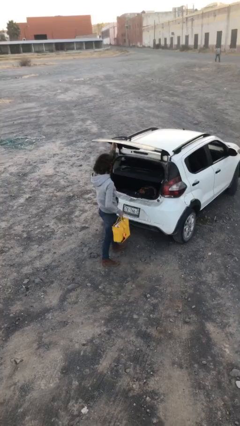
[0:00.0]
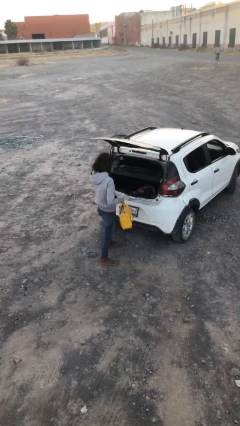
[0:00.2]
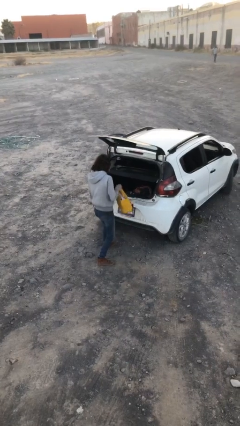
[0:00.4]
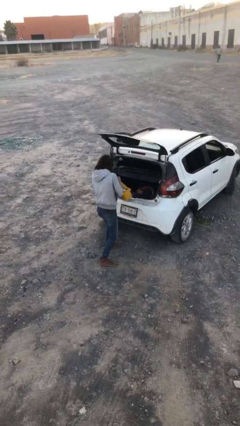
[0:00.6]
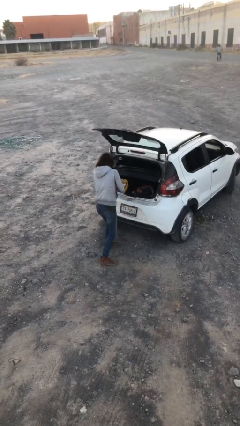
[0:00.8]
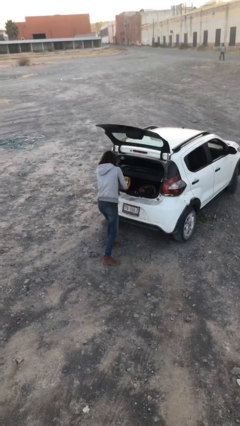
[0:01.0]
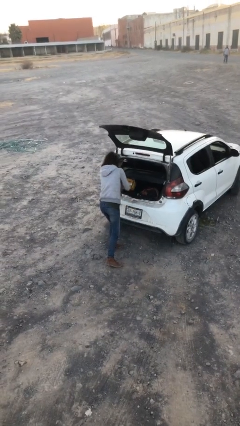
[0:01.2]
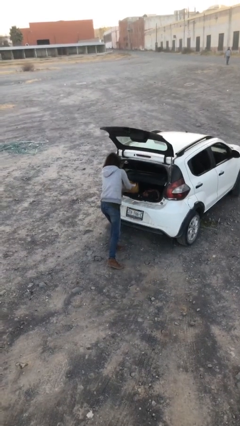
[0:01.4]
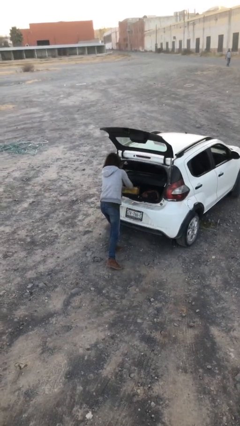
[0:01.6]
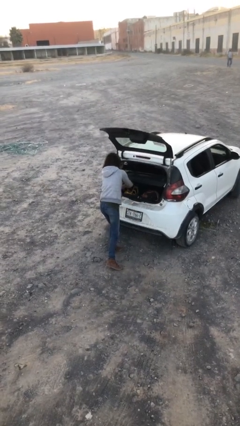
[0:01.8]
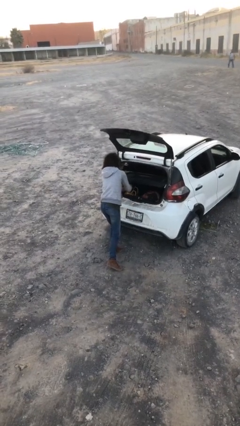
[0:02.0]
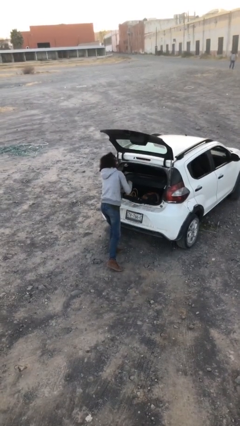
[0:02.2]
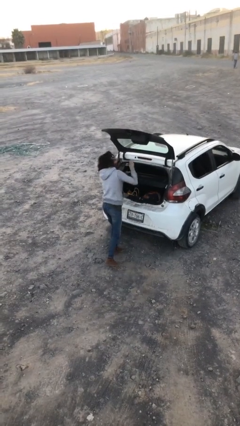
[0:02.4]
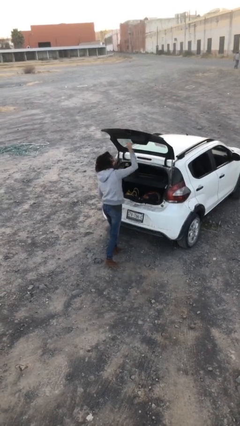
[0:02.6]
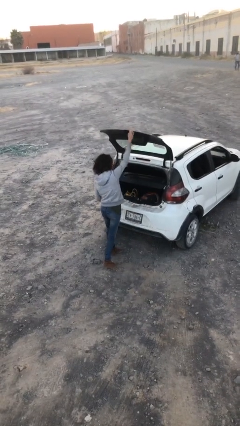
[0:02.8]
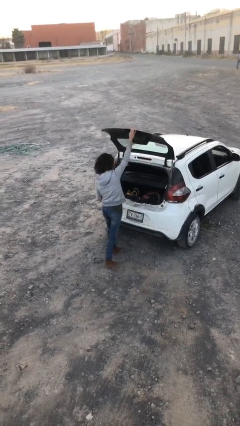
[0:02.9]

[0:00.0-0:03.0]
person loads car

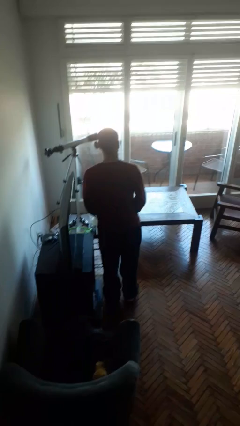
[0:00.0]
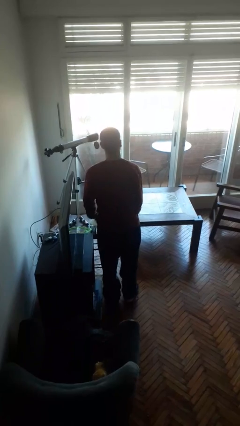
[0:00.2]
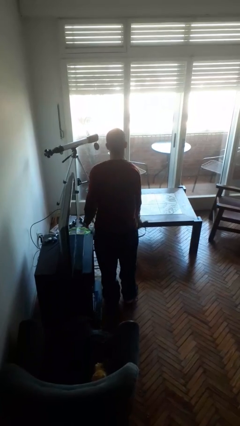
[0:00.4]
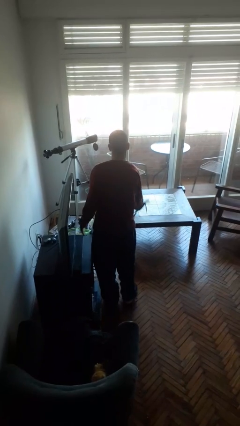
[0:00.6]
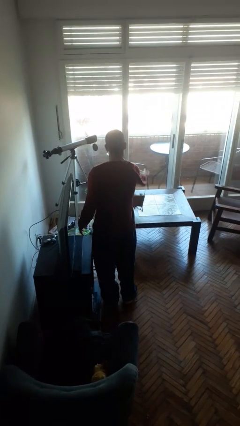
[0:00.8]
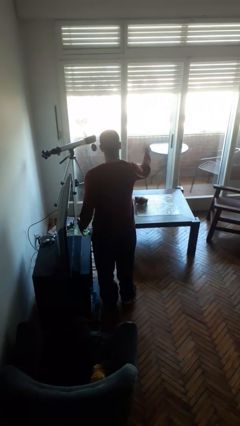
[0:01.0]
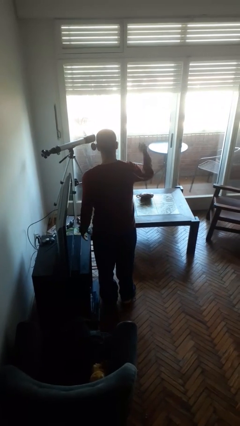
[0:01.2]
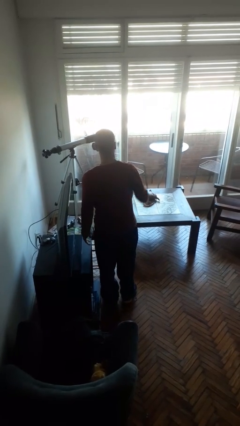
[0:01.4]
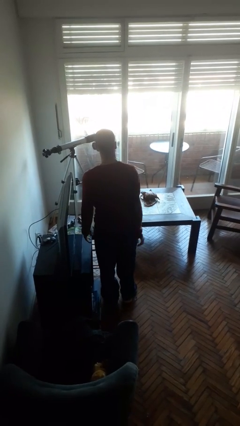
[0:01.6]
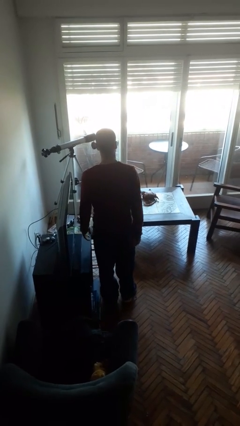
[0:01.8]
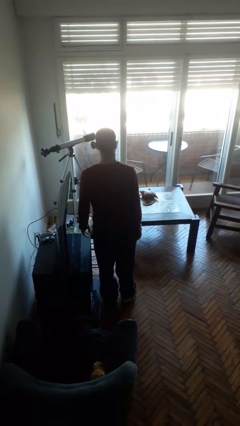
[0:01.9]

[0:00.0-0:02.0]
person throws object on table

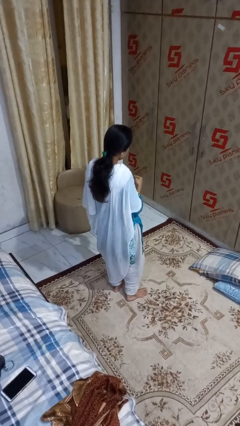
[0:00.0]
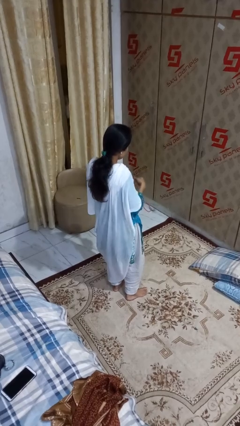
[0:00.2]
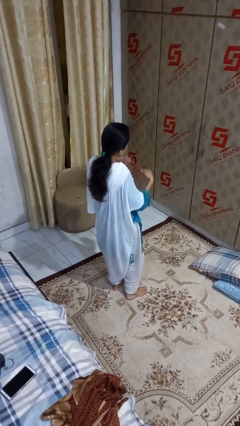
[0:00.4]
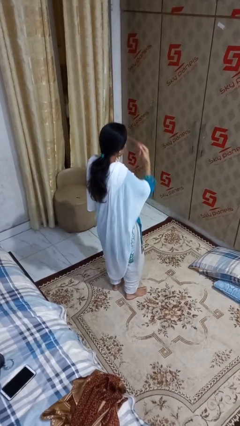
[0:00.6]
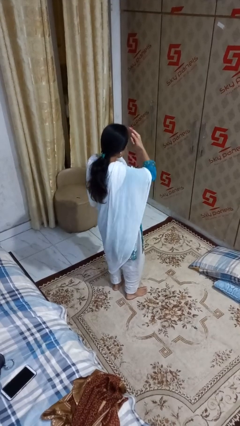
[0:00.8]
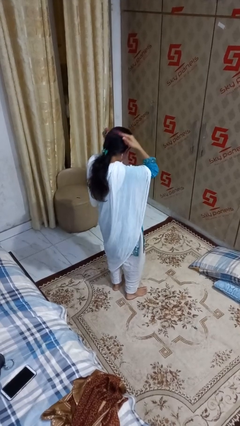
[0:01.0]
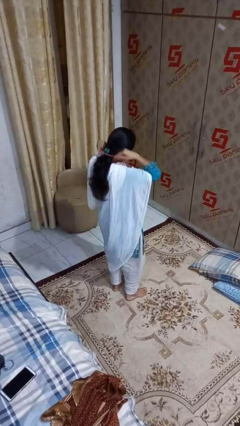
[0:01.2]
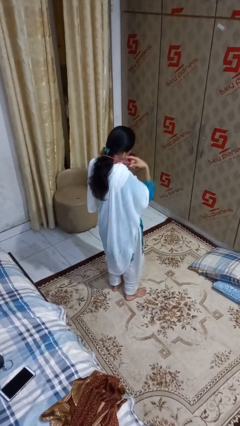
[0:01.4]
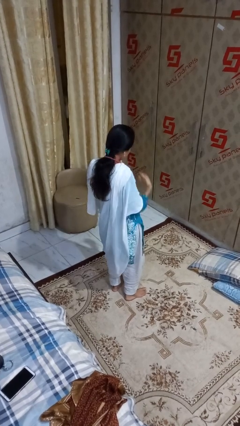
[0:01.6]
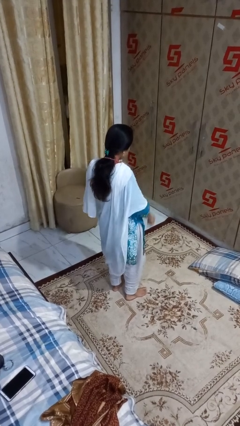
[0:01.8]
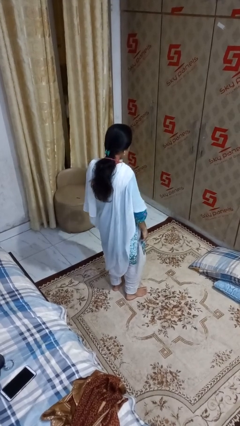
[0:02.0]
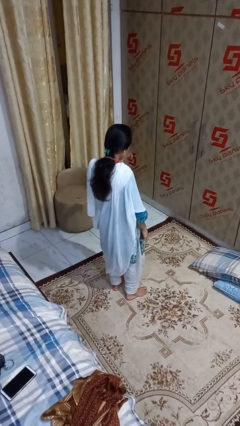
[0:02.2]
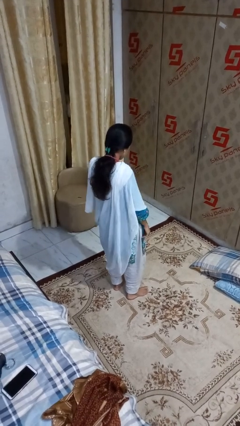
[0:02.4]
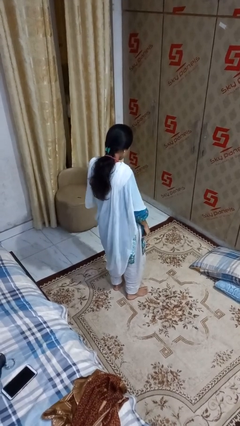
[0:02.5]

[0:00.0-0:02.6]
person puts on necklace

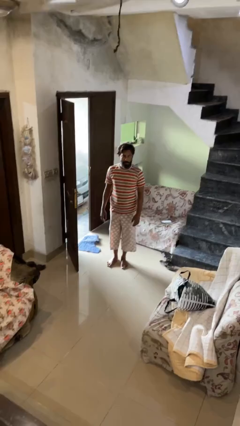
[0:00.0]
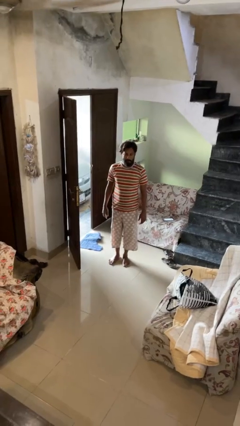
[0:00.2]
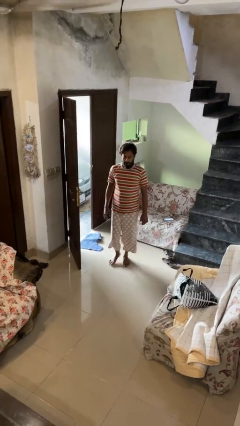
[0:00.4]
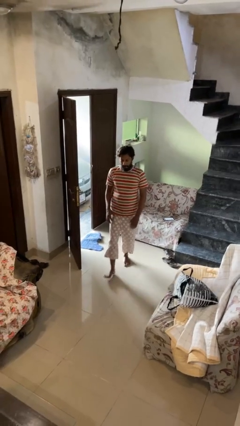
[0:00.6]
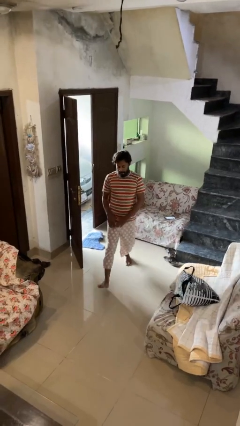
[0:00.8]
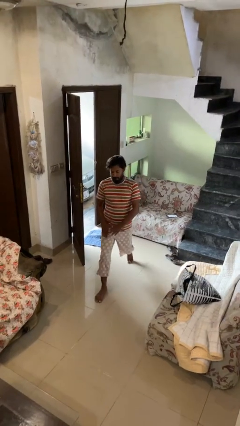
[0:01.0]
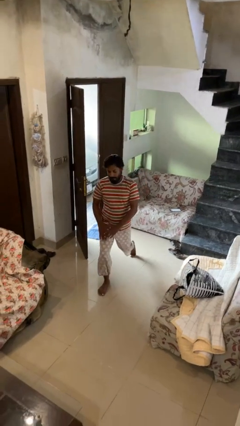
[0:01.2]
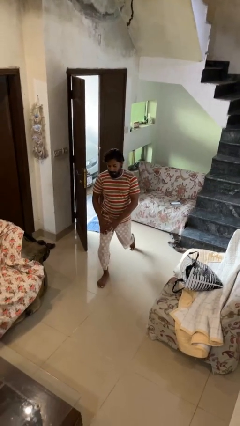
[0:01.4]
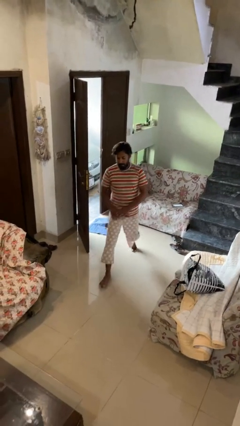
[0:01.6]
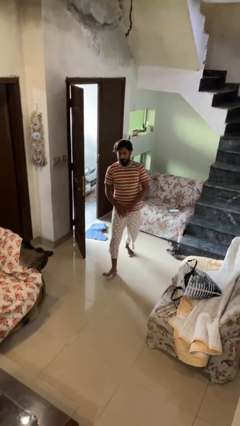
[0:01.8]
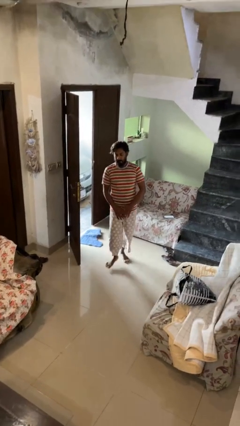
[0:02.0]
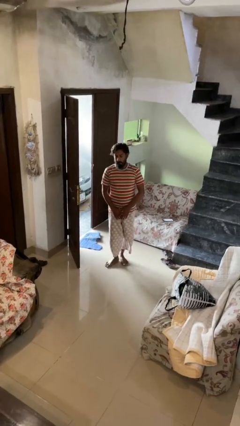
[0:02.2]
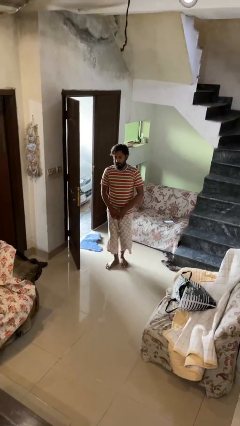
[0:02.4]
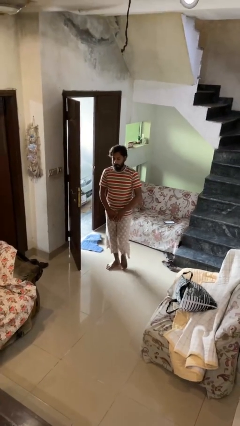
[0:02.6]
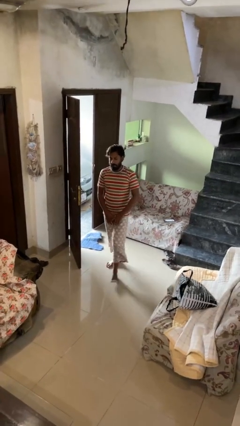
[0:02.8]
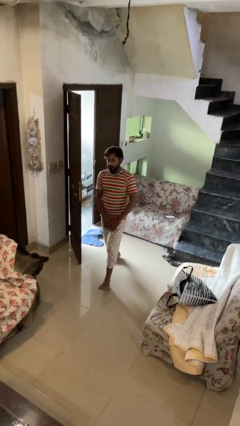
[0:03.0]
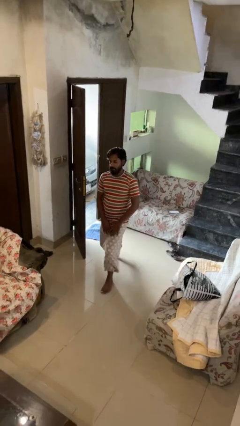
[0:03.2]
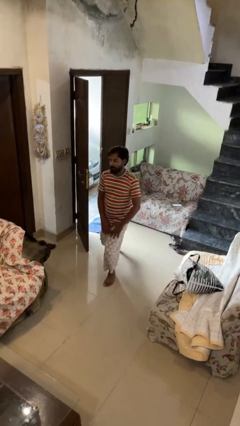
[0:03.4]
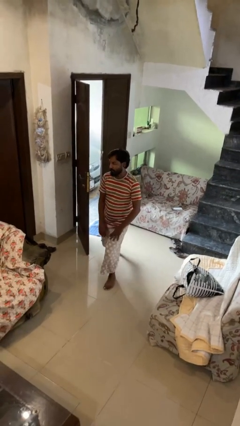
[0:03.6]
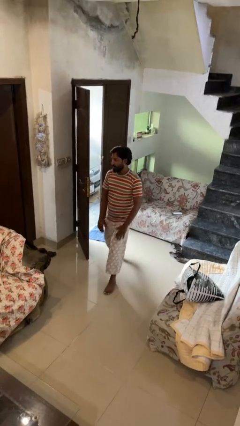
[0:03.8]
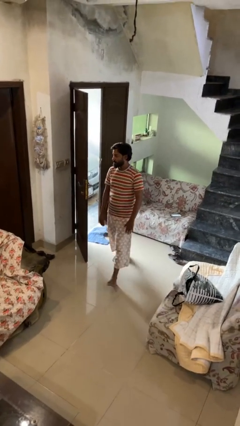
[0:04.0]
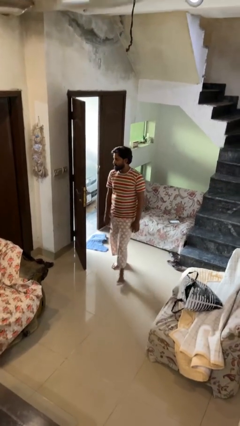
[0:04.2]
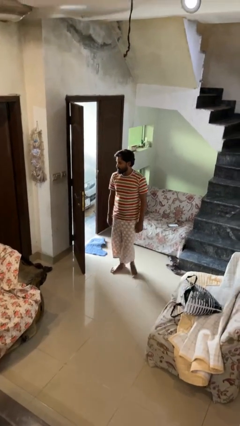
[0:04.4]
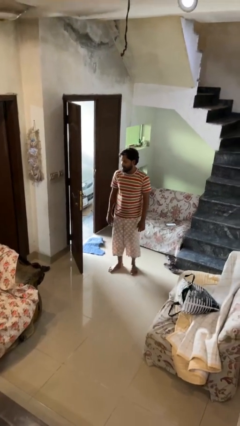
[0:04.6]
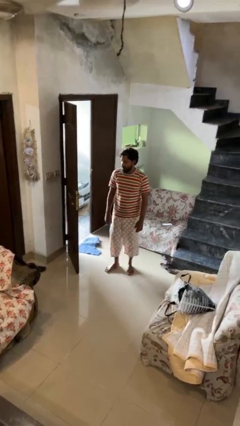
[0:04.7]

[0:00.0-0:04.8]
person exercises with lunges

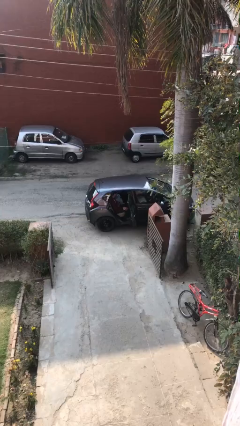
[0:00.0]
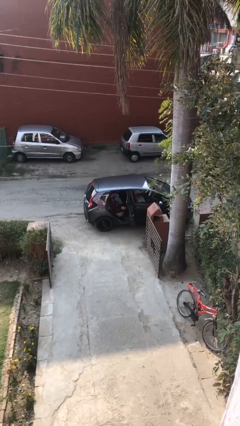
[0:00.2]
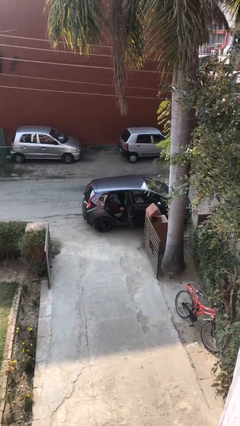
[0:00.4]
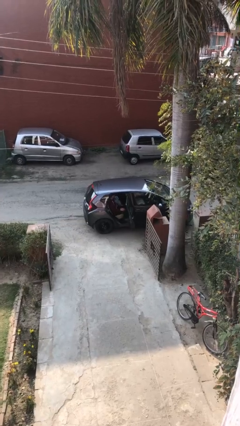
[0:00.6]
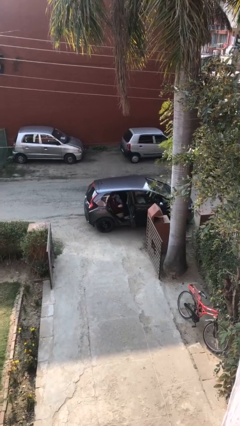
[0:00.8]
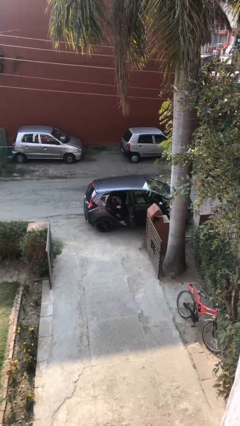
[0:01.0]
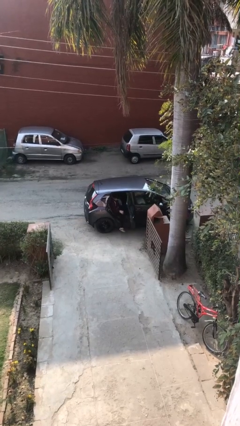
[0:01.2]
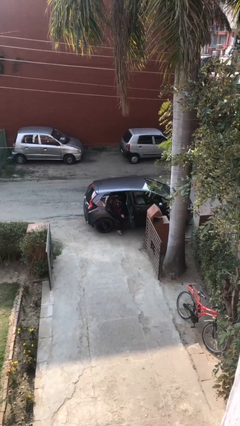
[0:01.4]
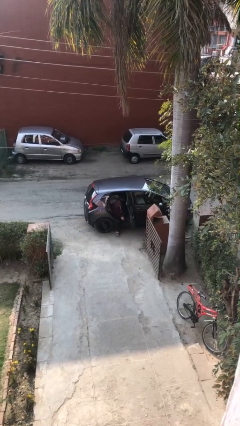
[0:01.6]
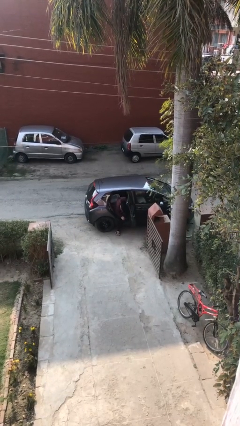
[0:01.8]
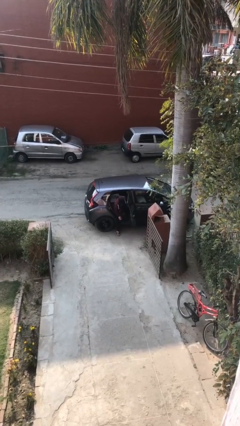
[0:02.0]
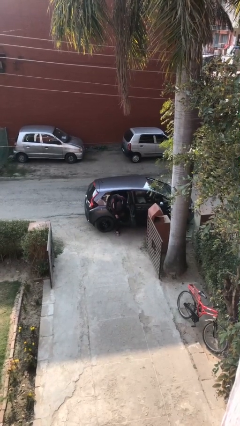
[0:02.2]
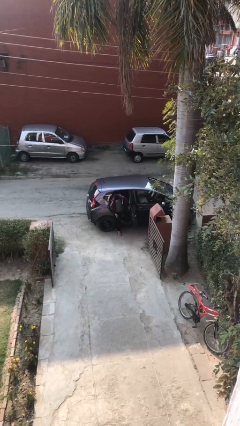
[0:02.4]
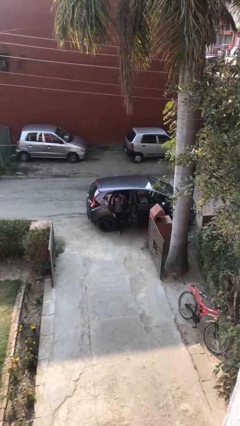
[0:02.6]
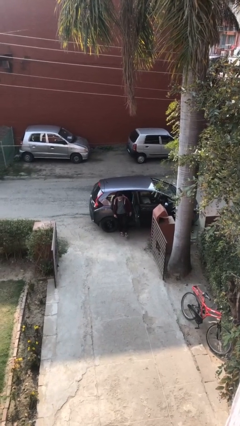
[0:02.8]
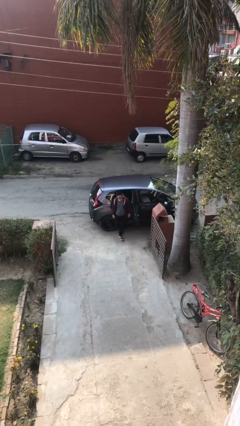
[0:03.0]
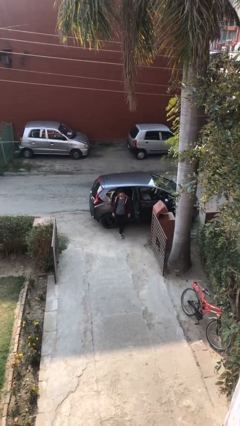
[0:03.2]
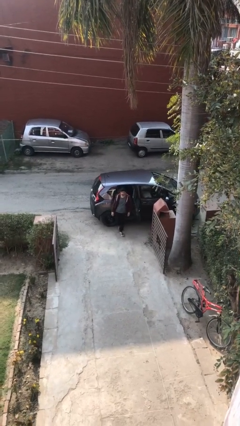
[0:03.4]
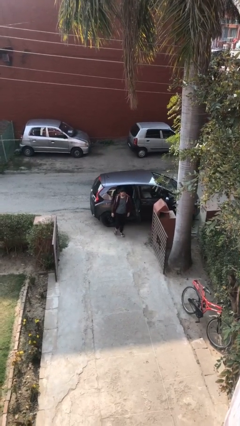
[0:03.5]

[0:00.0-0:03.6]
person exits car

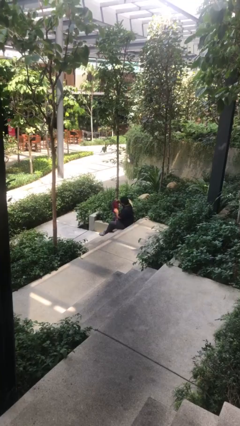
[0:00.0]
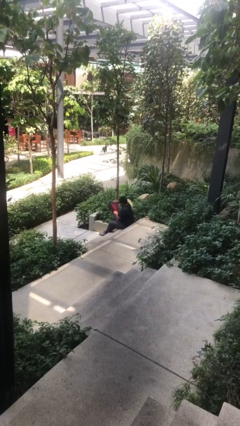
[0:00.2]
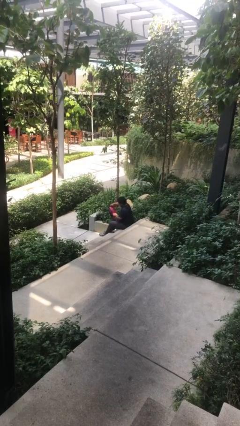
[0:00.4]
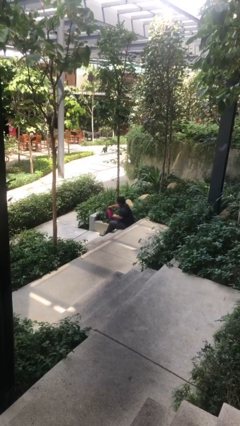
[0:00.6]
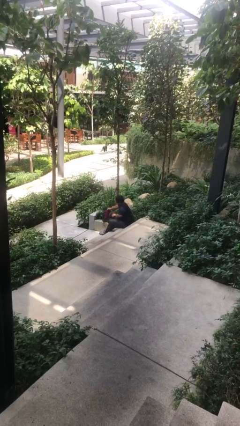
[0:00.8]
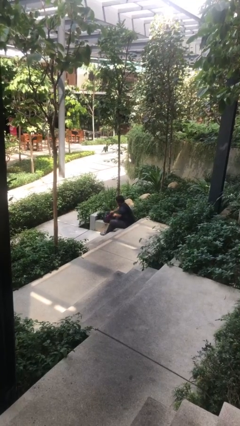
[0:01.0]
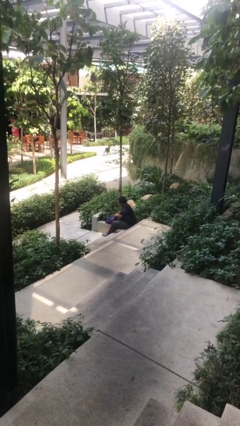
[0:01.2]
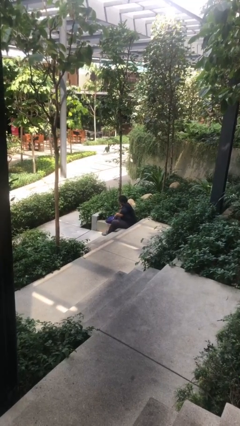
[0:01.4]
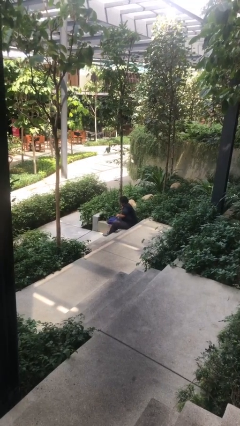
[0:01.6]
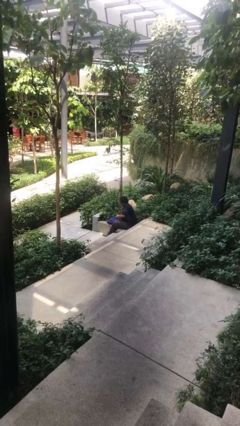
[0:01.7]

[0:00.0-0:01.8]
person puts down object on floor
